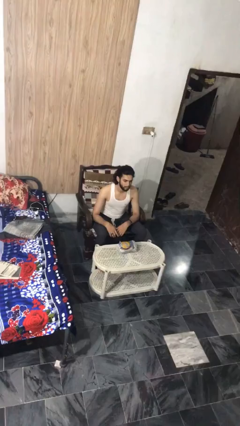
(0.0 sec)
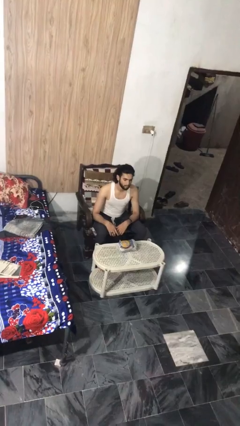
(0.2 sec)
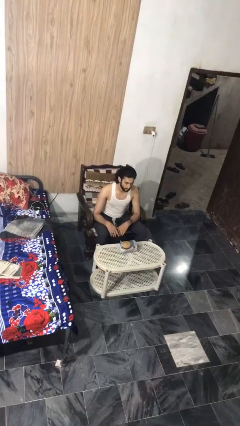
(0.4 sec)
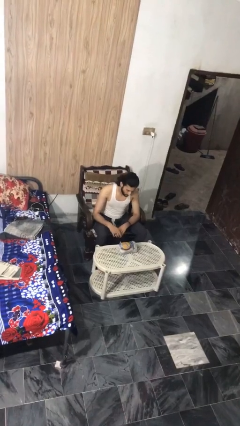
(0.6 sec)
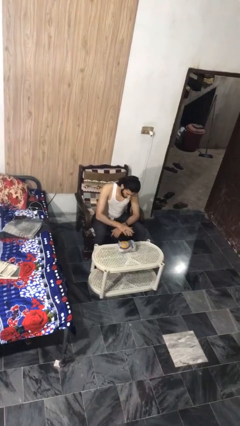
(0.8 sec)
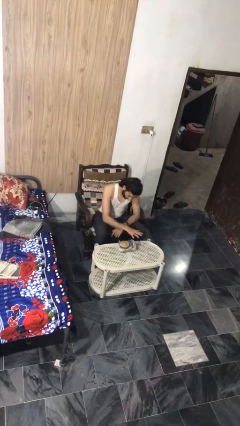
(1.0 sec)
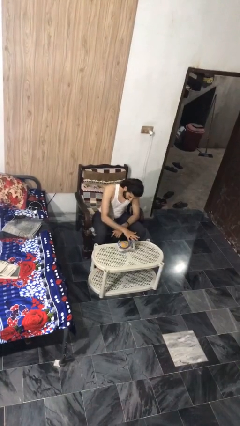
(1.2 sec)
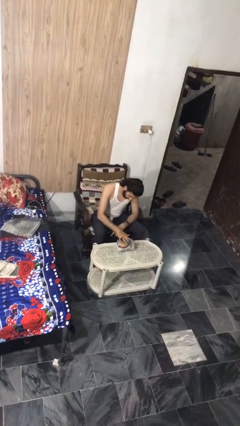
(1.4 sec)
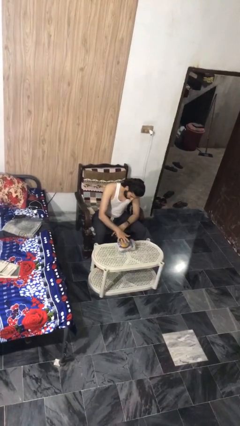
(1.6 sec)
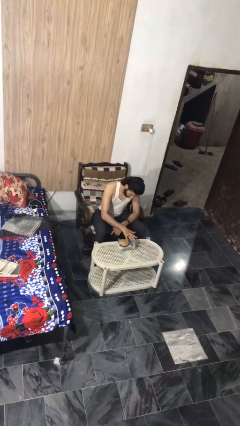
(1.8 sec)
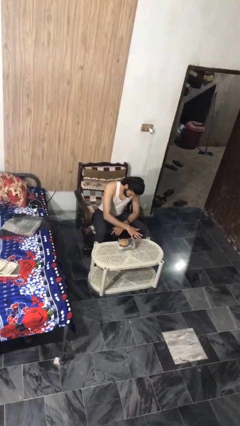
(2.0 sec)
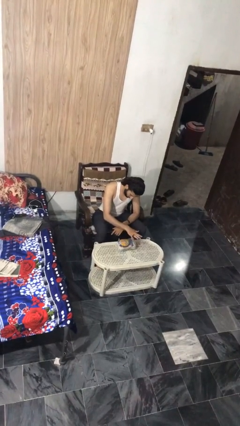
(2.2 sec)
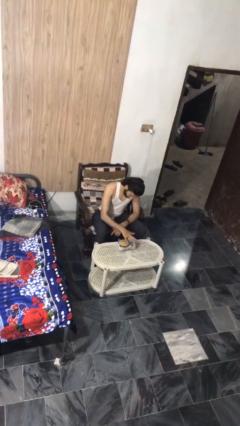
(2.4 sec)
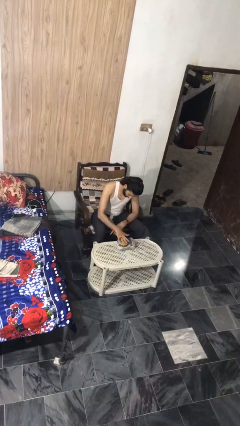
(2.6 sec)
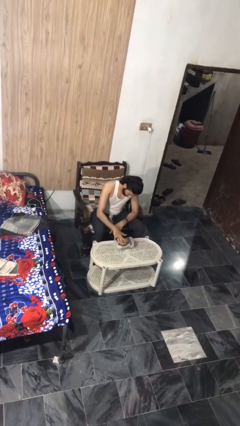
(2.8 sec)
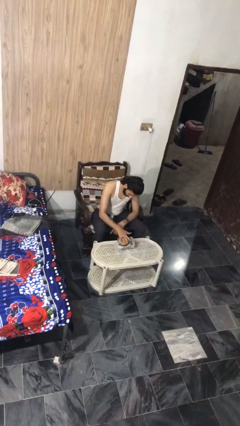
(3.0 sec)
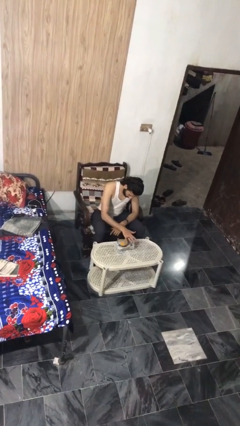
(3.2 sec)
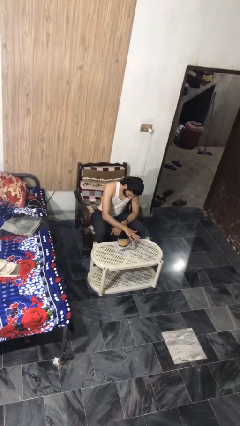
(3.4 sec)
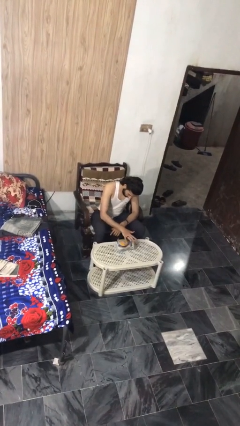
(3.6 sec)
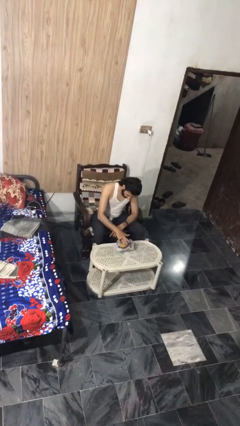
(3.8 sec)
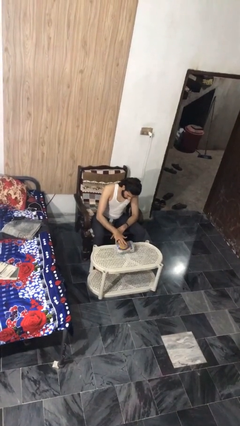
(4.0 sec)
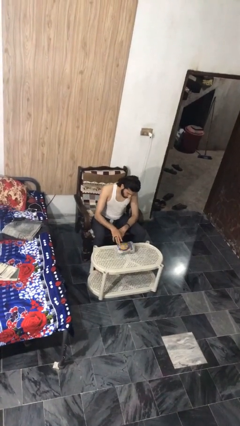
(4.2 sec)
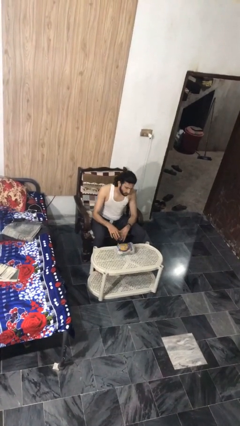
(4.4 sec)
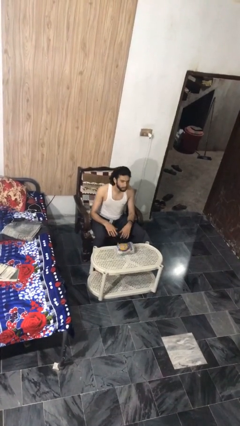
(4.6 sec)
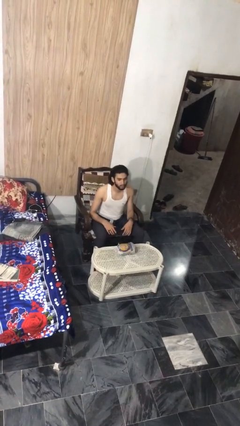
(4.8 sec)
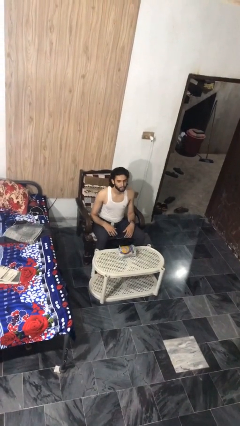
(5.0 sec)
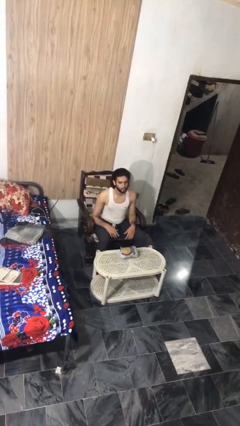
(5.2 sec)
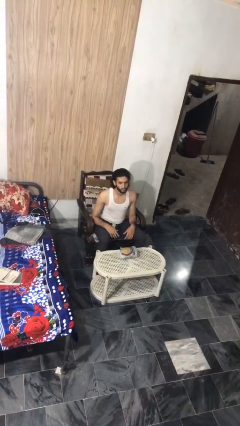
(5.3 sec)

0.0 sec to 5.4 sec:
person waves hand over object

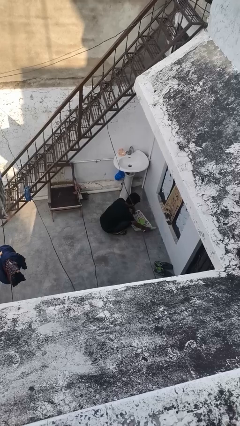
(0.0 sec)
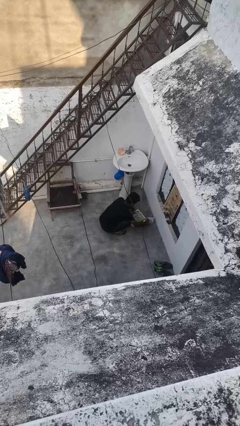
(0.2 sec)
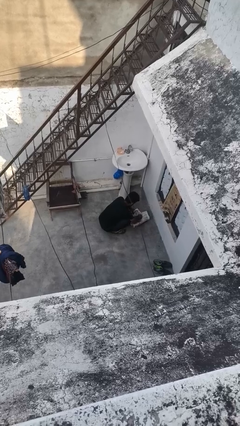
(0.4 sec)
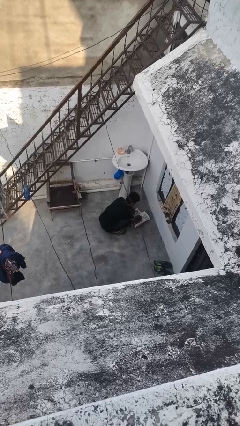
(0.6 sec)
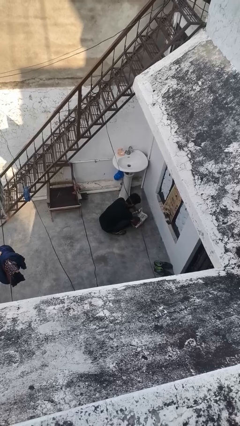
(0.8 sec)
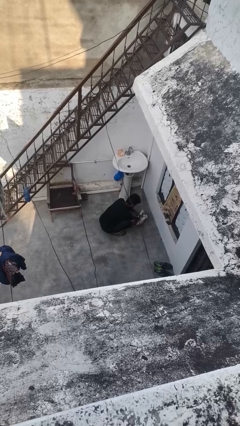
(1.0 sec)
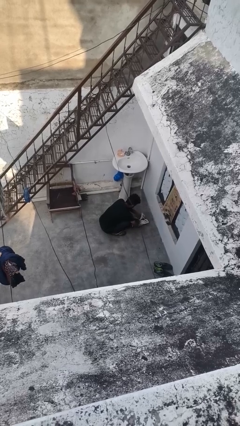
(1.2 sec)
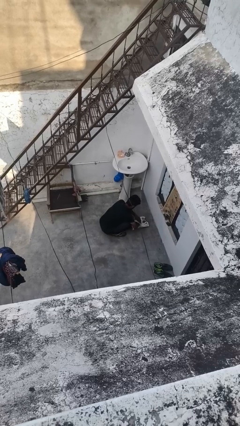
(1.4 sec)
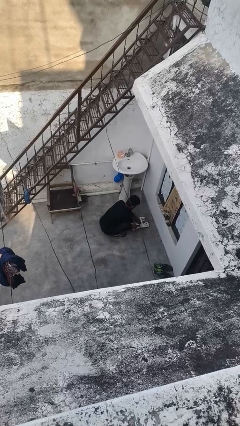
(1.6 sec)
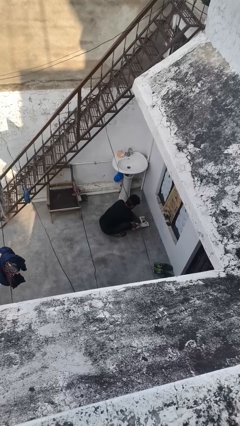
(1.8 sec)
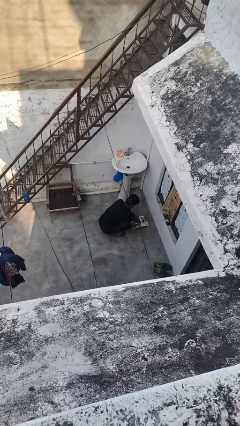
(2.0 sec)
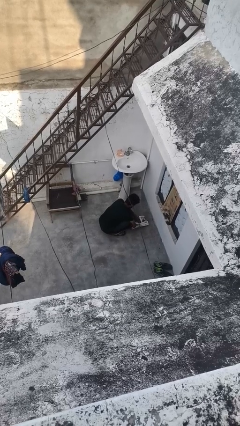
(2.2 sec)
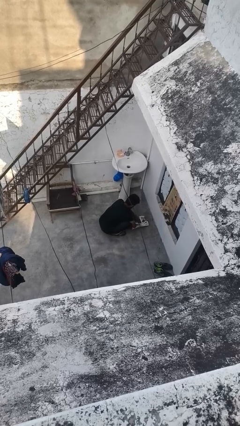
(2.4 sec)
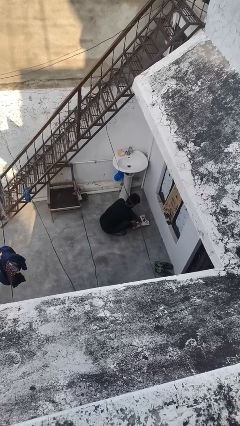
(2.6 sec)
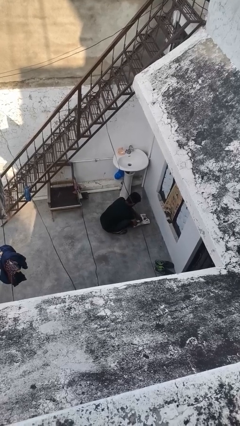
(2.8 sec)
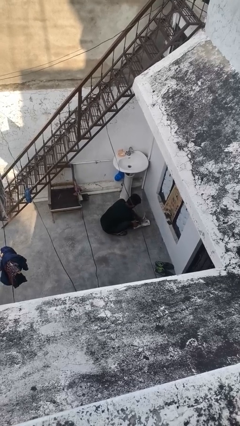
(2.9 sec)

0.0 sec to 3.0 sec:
person wraps box

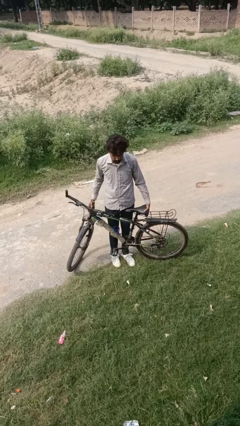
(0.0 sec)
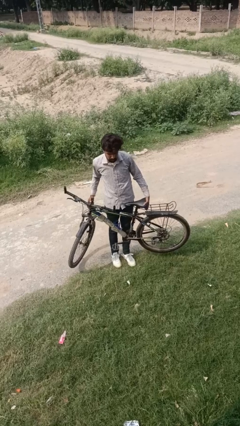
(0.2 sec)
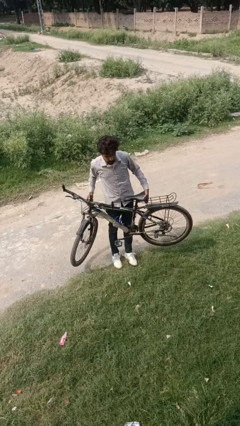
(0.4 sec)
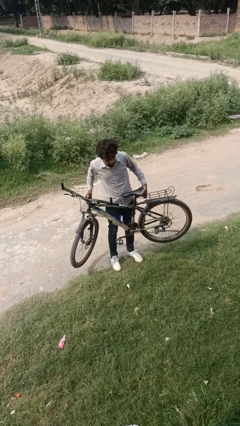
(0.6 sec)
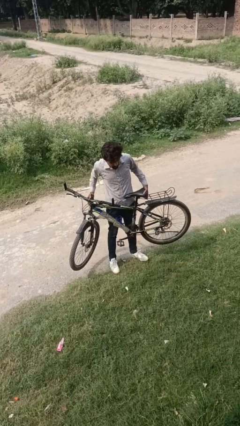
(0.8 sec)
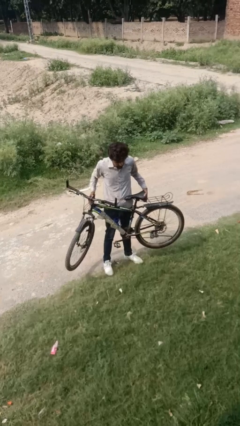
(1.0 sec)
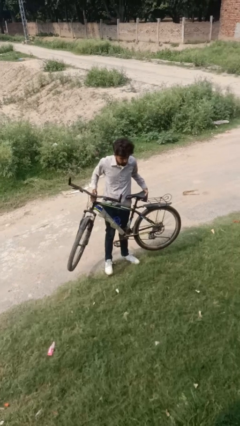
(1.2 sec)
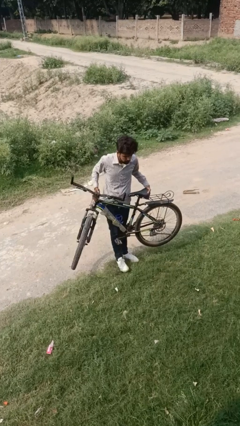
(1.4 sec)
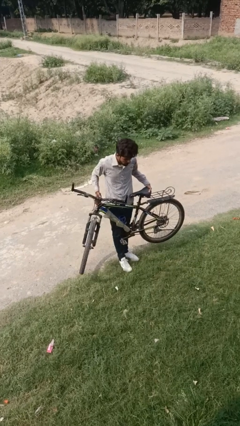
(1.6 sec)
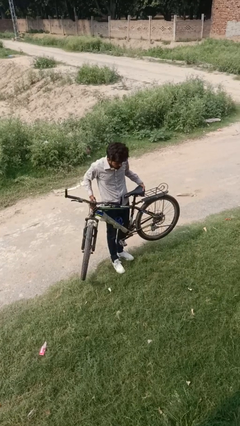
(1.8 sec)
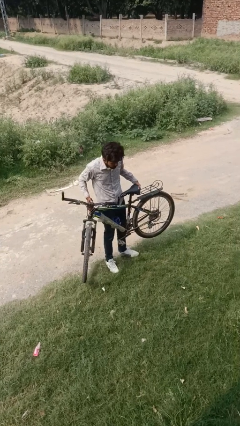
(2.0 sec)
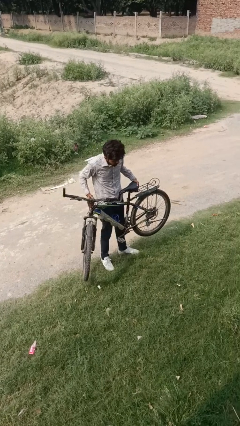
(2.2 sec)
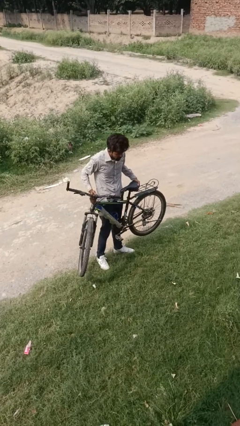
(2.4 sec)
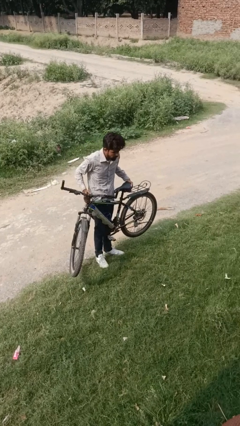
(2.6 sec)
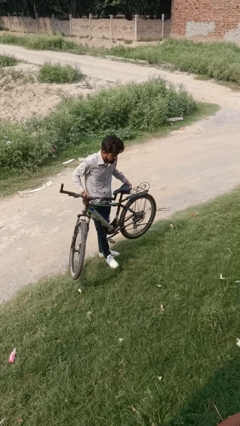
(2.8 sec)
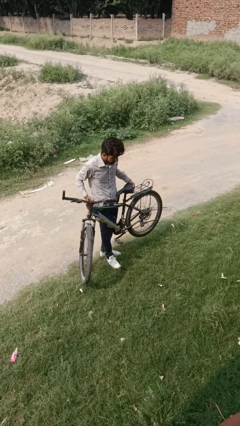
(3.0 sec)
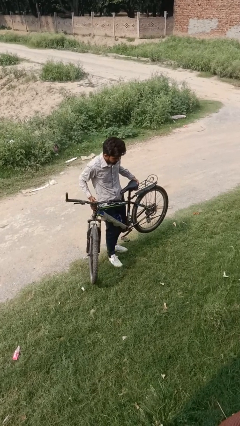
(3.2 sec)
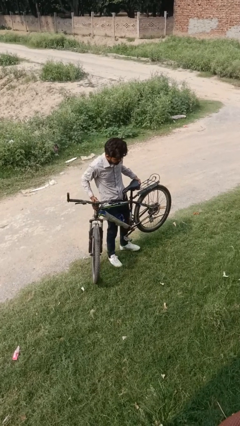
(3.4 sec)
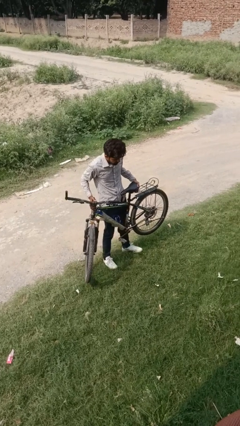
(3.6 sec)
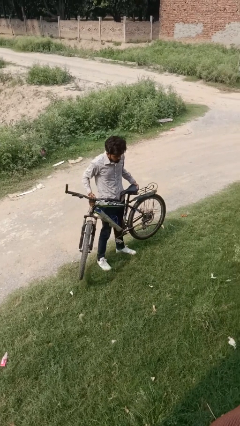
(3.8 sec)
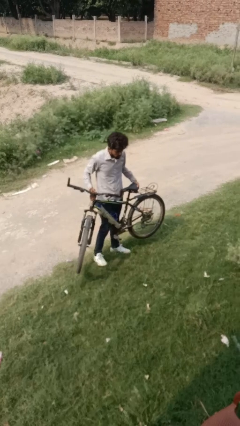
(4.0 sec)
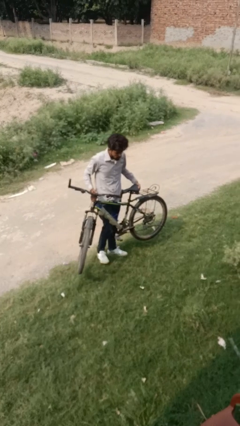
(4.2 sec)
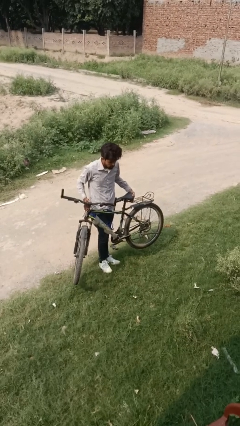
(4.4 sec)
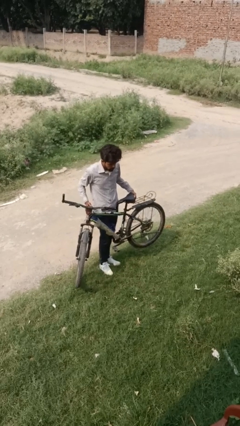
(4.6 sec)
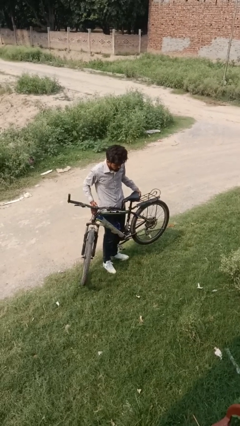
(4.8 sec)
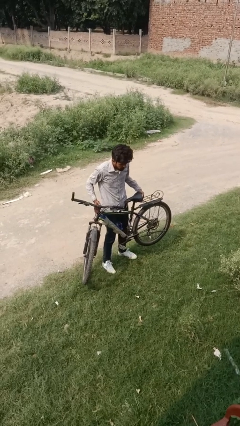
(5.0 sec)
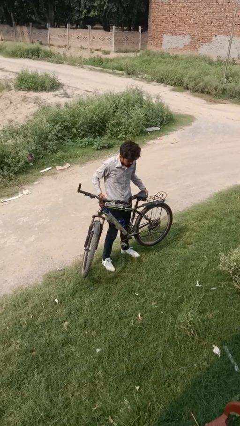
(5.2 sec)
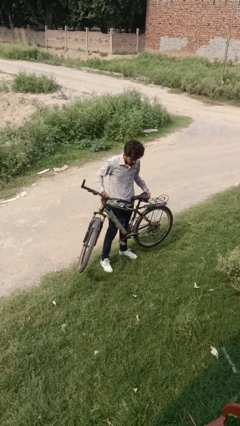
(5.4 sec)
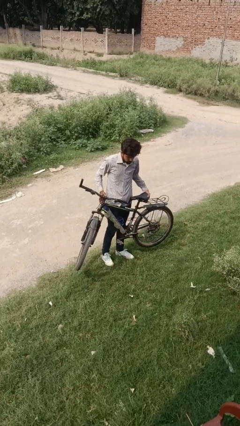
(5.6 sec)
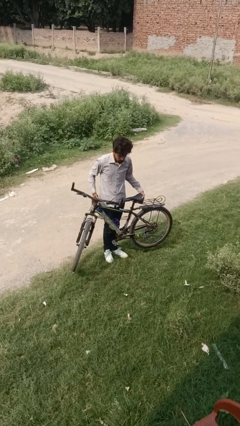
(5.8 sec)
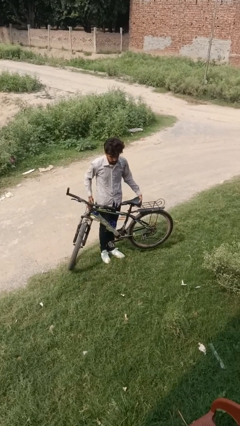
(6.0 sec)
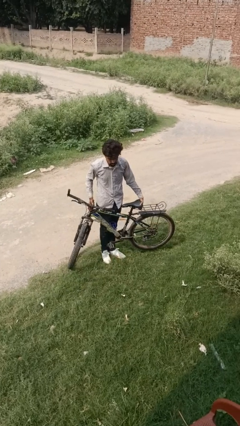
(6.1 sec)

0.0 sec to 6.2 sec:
person carries bicycle

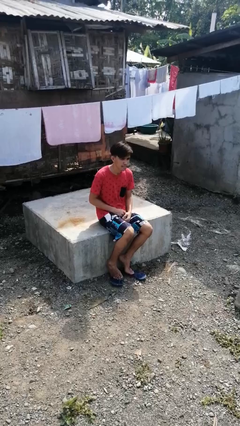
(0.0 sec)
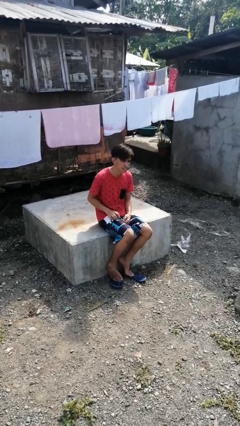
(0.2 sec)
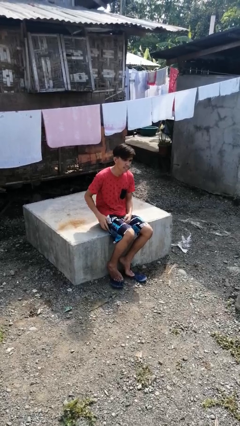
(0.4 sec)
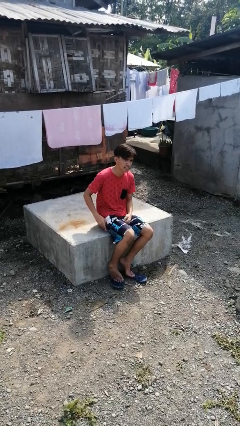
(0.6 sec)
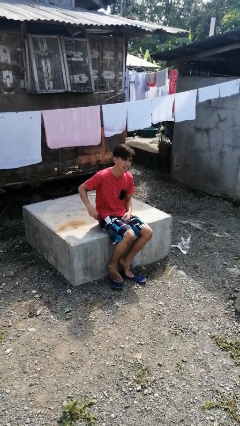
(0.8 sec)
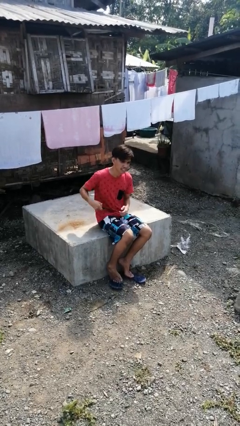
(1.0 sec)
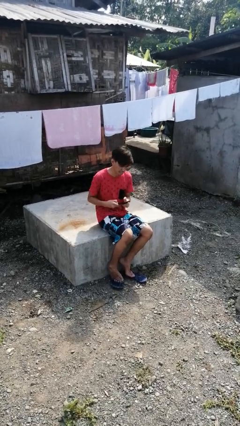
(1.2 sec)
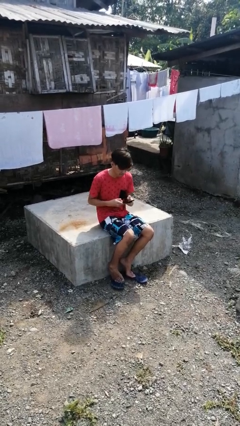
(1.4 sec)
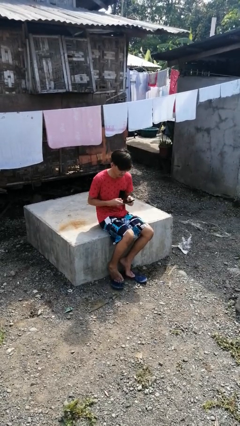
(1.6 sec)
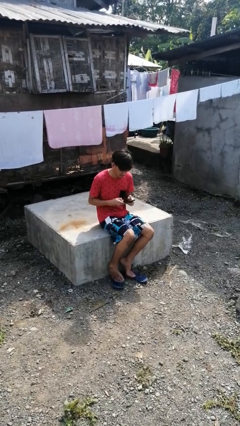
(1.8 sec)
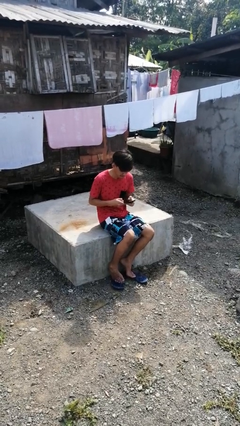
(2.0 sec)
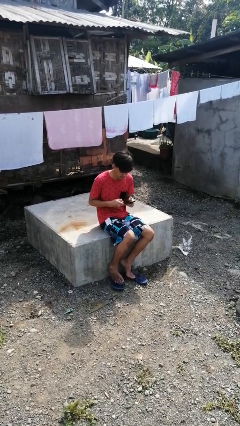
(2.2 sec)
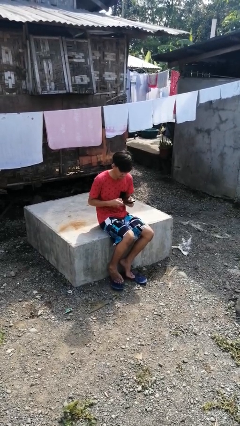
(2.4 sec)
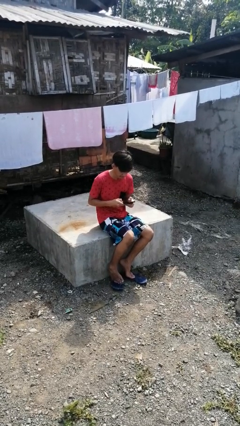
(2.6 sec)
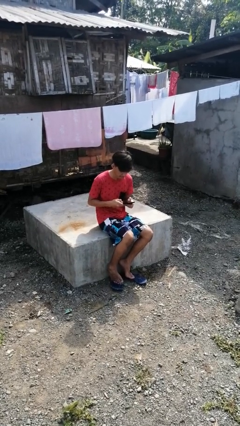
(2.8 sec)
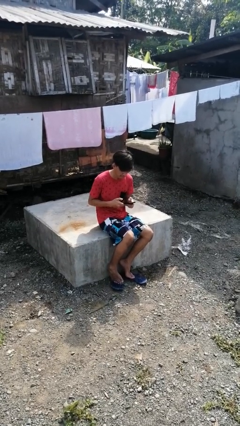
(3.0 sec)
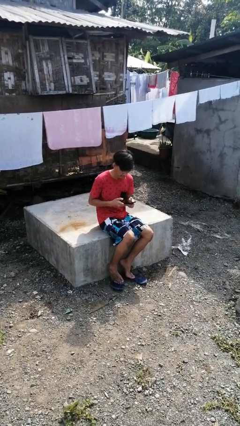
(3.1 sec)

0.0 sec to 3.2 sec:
person takes phone from pocket
